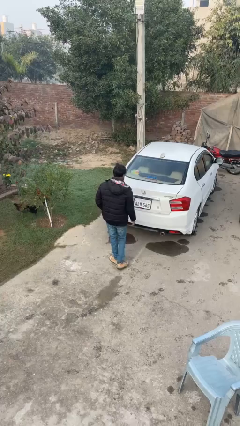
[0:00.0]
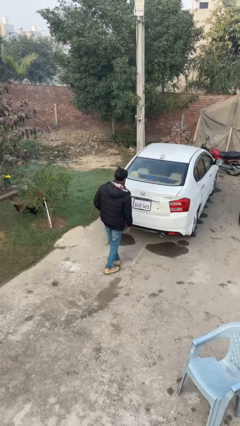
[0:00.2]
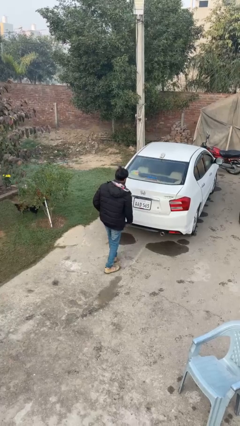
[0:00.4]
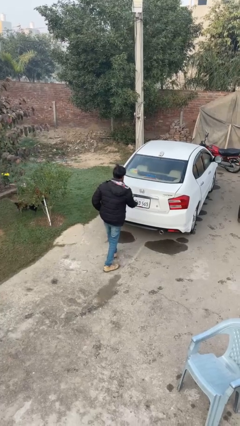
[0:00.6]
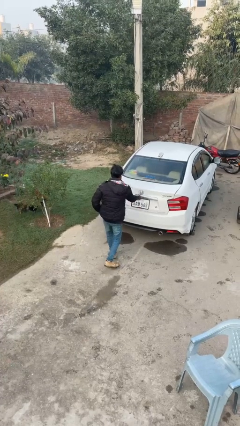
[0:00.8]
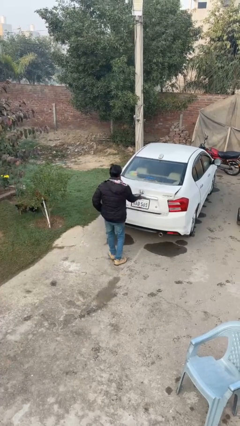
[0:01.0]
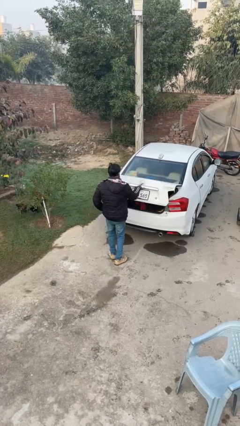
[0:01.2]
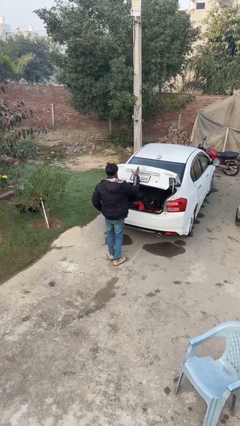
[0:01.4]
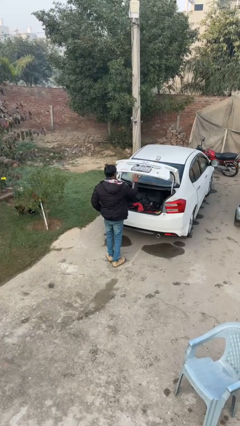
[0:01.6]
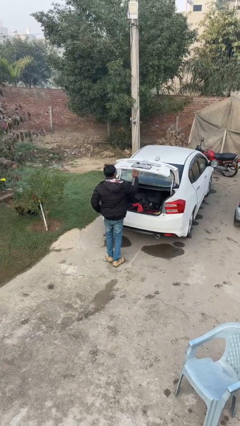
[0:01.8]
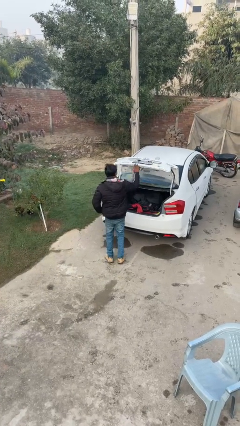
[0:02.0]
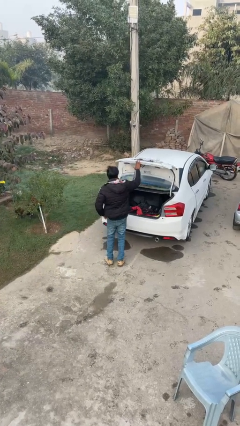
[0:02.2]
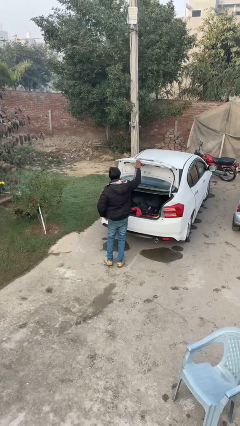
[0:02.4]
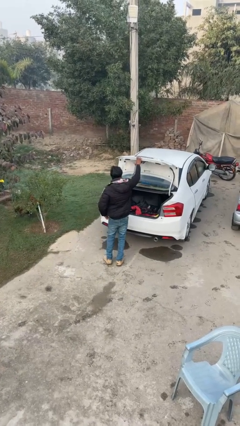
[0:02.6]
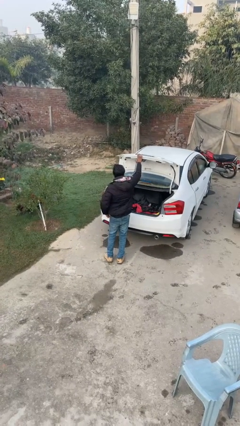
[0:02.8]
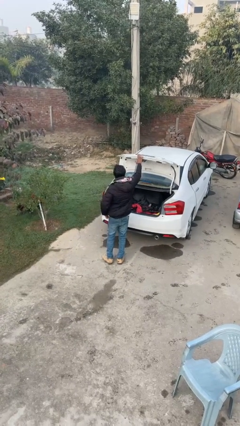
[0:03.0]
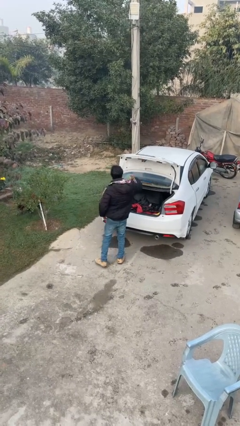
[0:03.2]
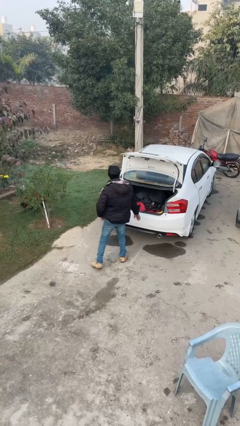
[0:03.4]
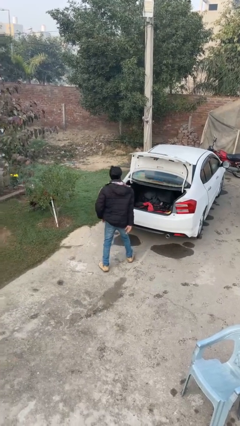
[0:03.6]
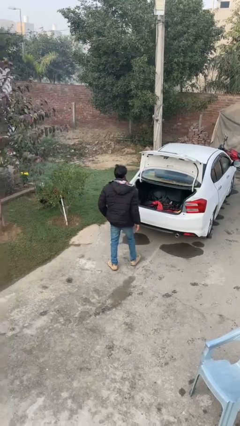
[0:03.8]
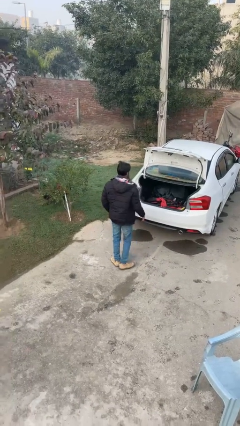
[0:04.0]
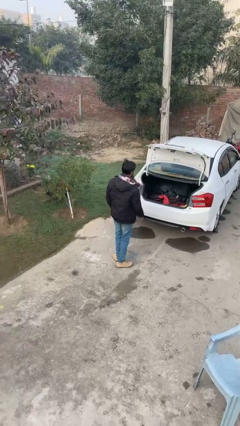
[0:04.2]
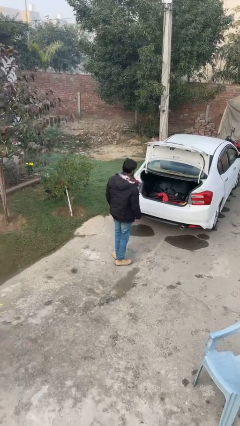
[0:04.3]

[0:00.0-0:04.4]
person opens car trunk

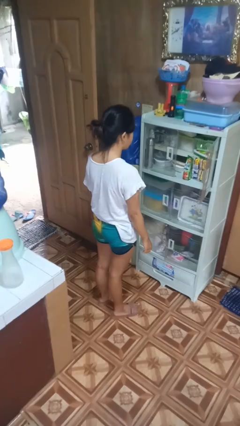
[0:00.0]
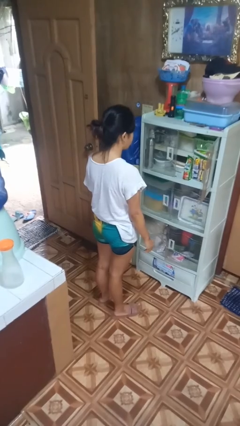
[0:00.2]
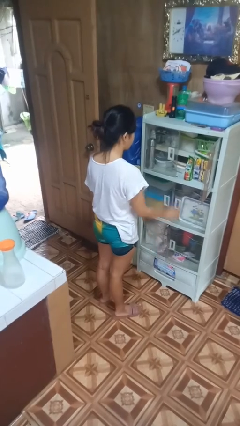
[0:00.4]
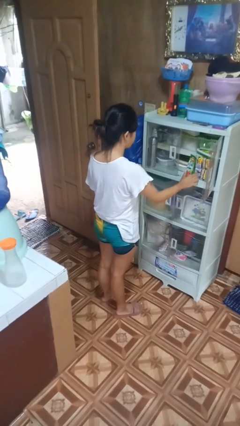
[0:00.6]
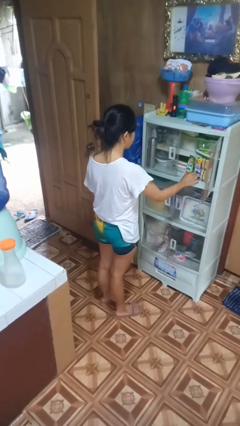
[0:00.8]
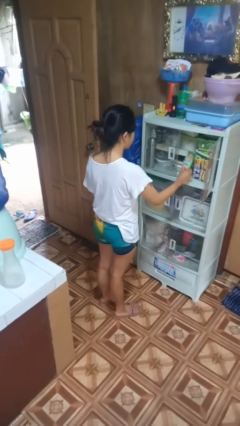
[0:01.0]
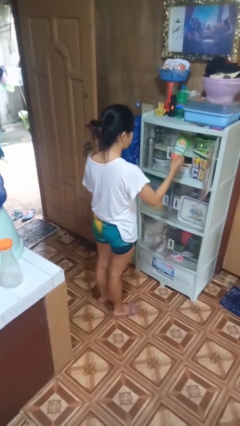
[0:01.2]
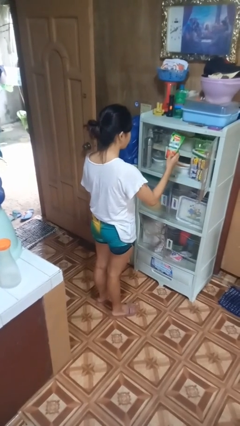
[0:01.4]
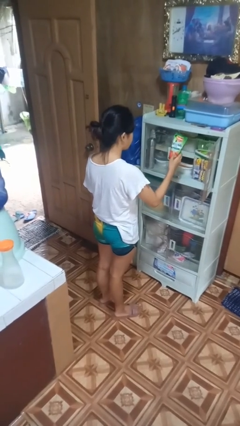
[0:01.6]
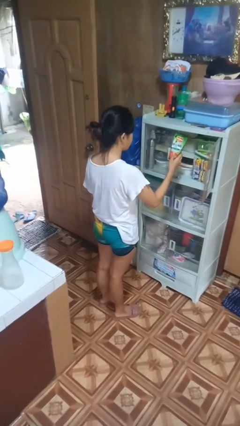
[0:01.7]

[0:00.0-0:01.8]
person picks up object from cabinet

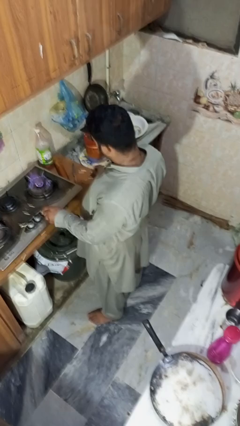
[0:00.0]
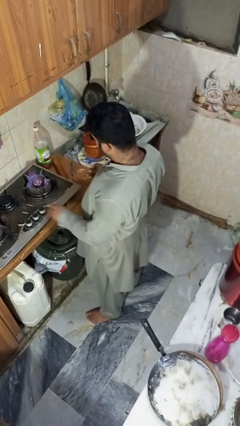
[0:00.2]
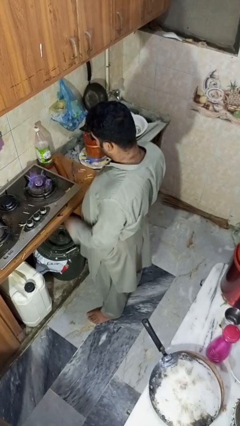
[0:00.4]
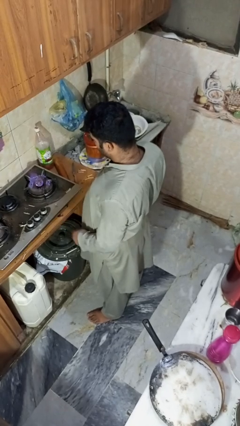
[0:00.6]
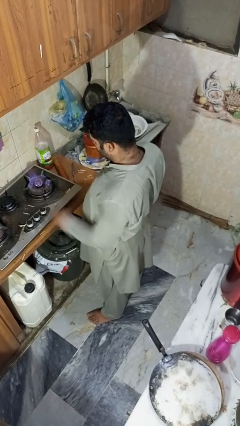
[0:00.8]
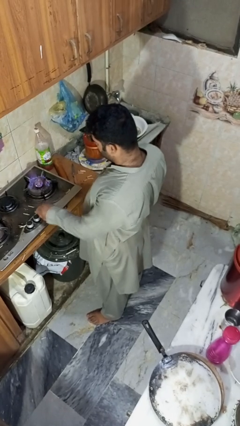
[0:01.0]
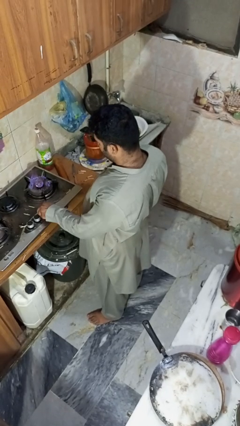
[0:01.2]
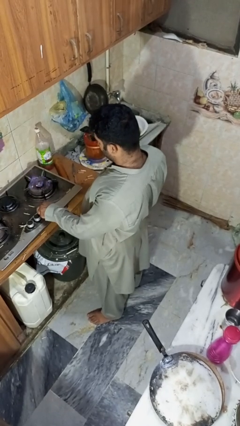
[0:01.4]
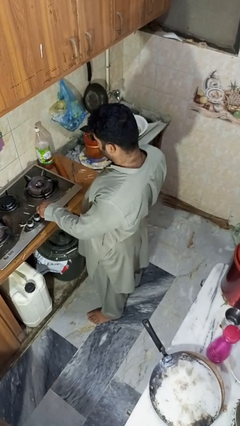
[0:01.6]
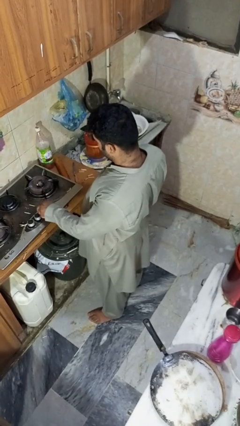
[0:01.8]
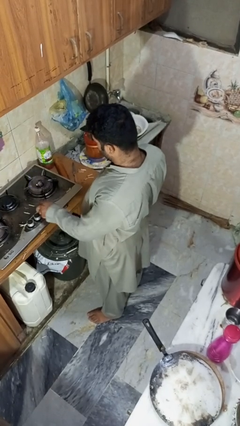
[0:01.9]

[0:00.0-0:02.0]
person turns off stovetop

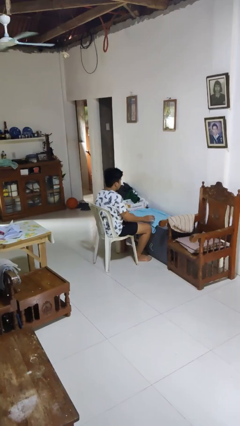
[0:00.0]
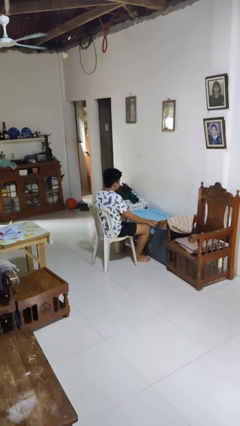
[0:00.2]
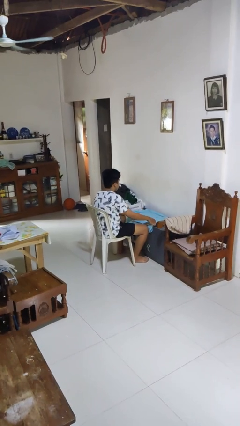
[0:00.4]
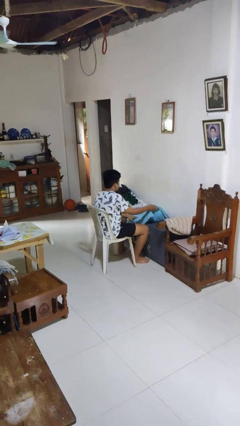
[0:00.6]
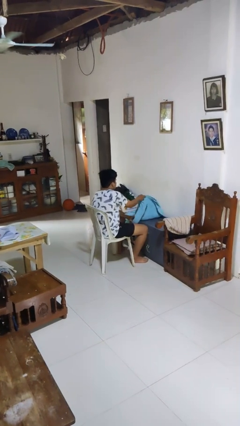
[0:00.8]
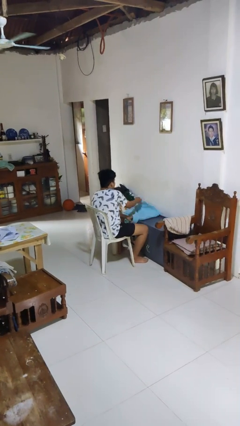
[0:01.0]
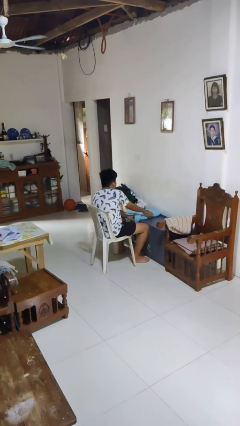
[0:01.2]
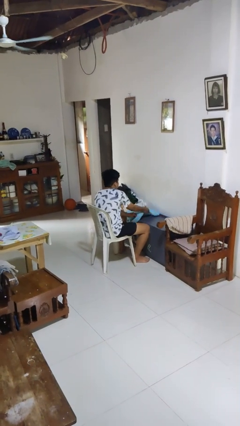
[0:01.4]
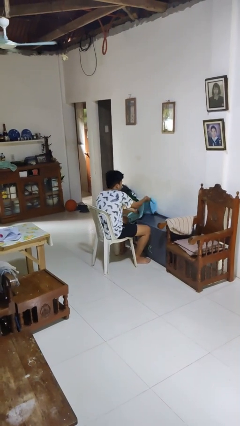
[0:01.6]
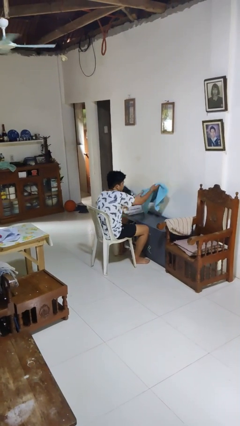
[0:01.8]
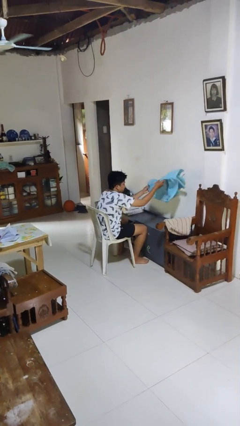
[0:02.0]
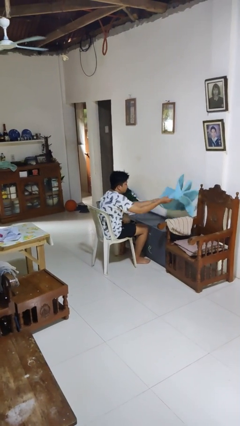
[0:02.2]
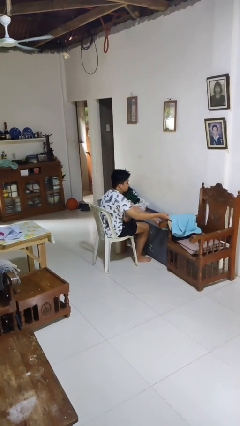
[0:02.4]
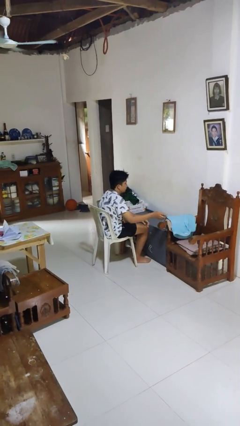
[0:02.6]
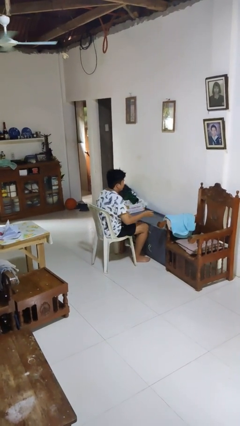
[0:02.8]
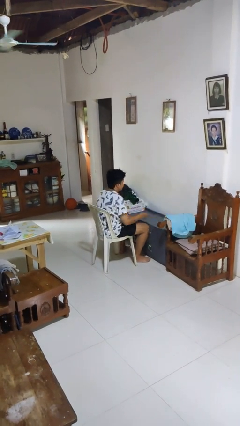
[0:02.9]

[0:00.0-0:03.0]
person folds towel

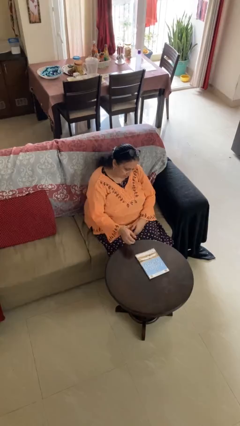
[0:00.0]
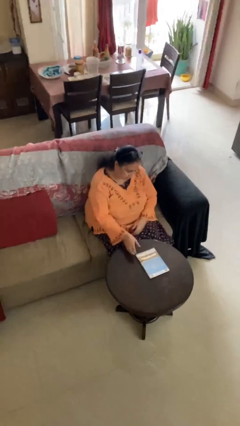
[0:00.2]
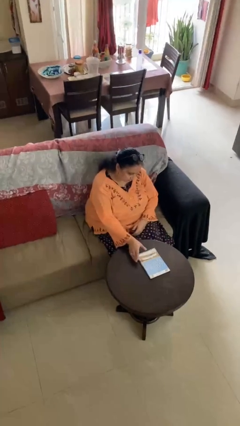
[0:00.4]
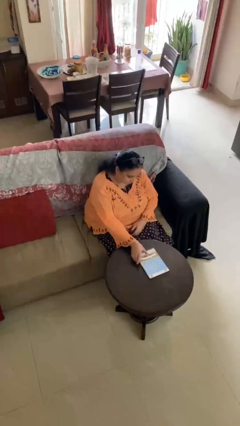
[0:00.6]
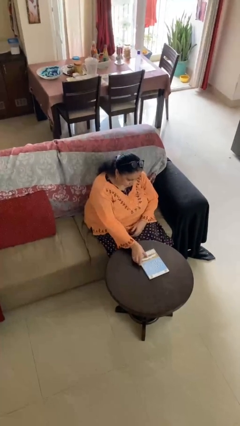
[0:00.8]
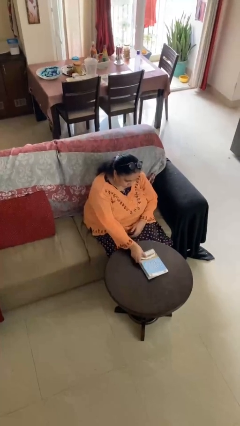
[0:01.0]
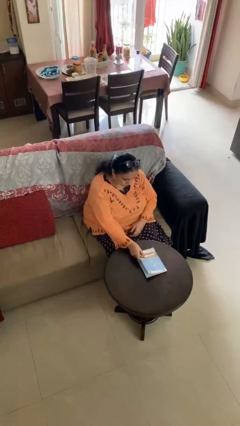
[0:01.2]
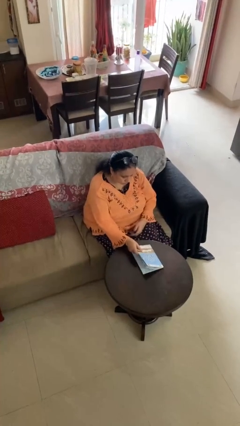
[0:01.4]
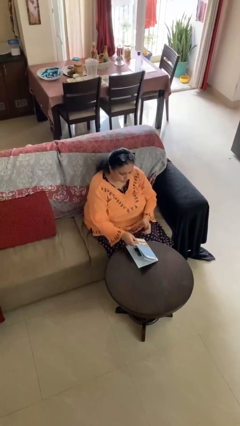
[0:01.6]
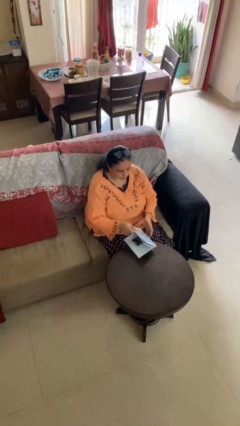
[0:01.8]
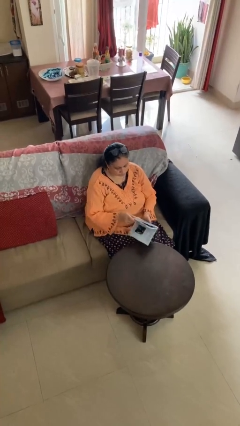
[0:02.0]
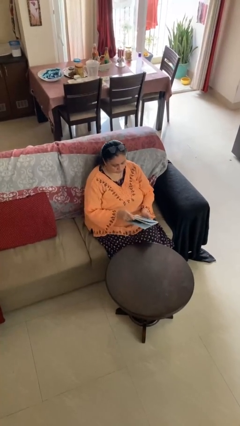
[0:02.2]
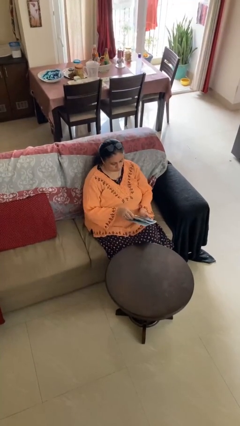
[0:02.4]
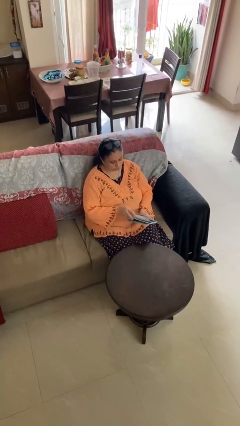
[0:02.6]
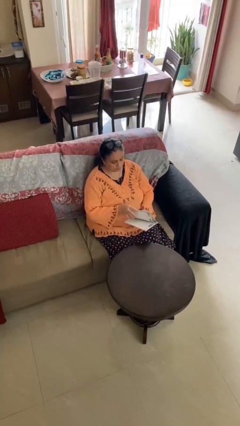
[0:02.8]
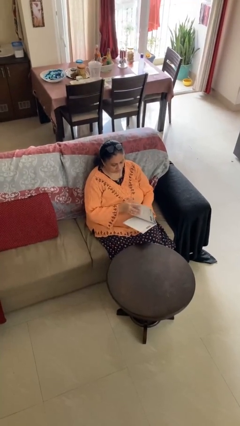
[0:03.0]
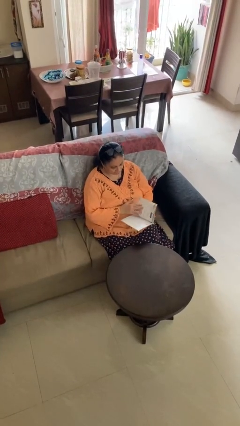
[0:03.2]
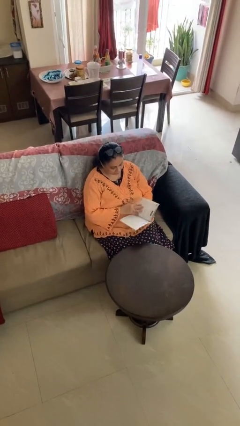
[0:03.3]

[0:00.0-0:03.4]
person picks up object from table

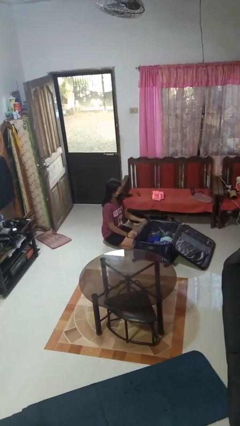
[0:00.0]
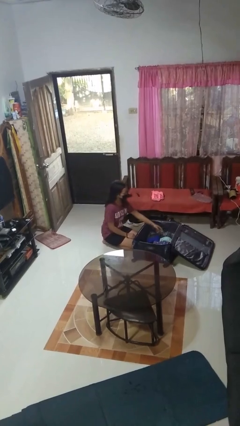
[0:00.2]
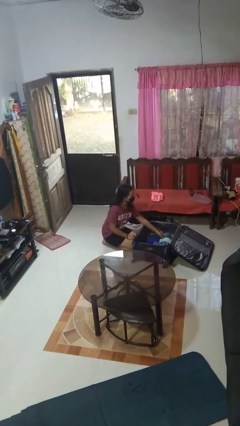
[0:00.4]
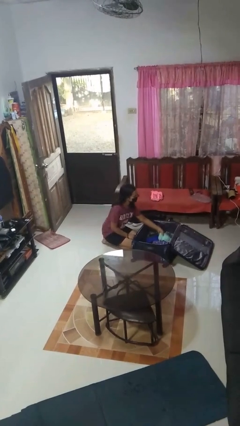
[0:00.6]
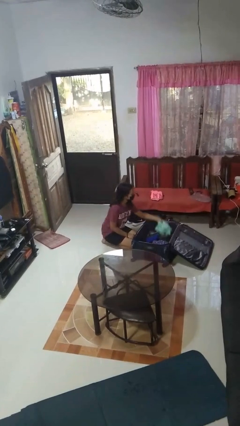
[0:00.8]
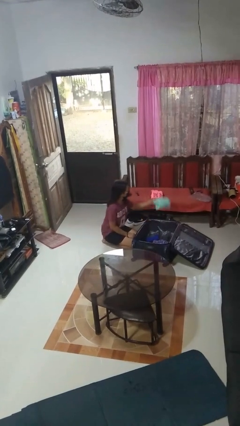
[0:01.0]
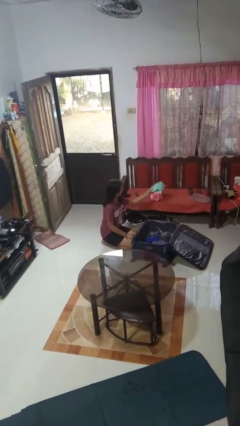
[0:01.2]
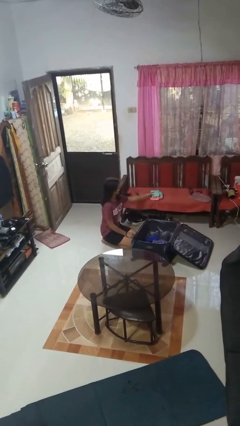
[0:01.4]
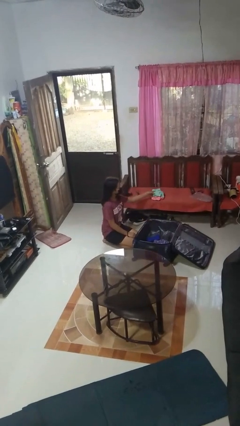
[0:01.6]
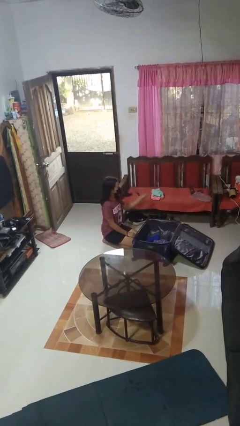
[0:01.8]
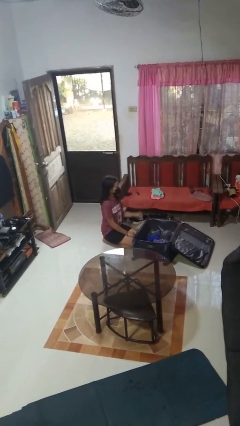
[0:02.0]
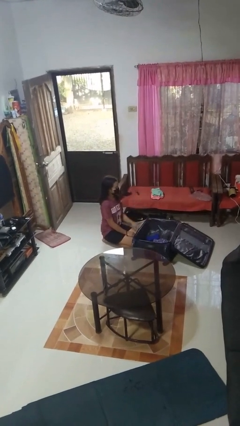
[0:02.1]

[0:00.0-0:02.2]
person unloads clothes from suitcase

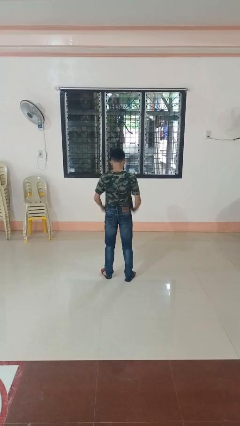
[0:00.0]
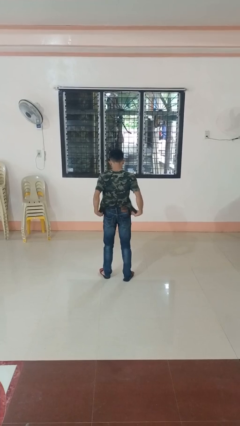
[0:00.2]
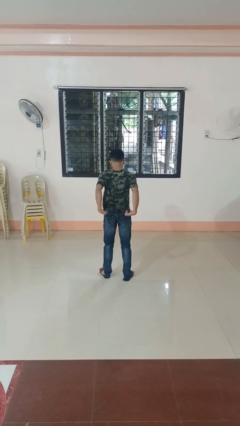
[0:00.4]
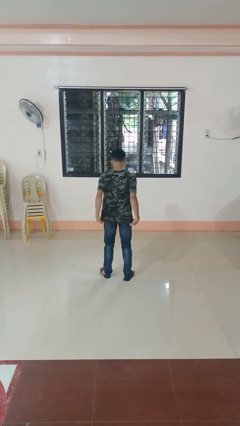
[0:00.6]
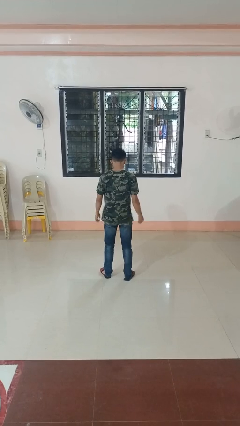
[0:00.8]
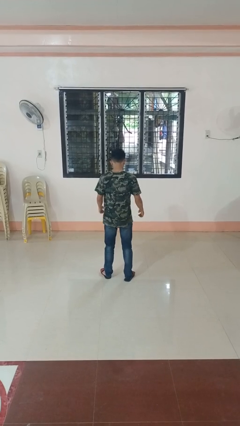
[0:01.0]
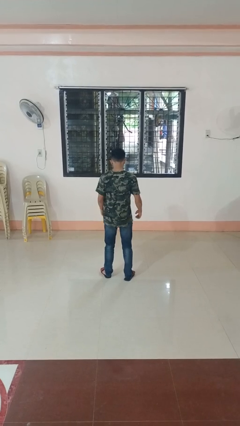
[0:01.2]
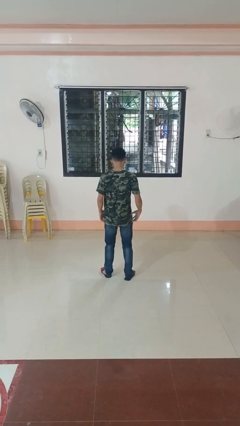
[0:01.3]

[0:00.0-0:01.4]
person untucks shirt
